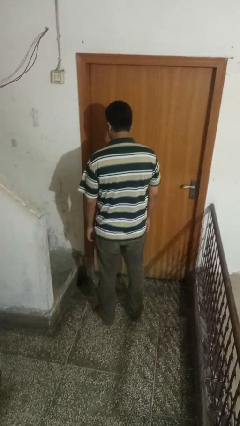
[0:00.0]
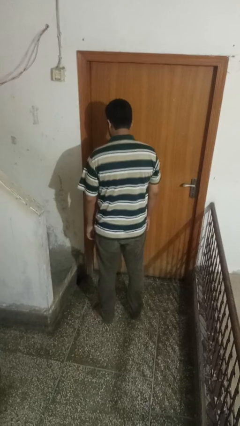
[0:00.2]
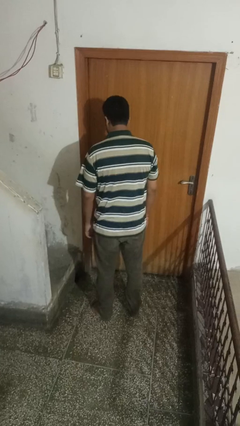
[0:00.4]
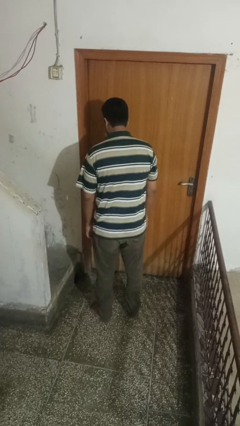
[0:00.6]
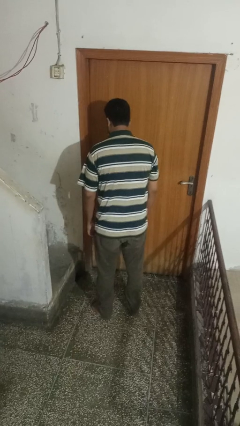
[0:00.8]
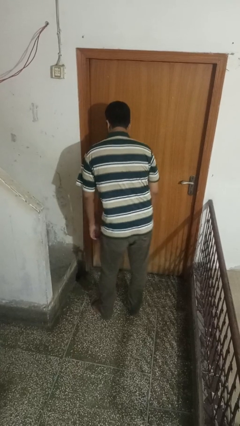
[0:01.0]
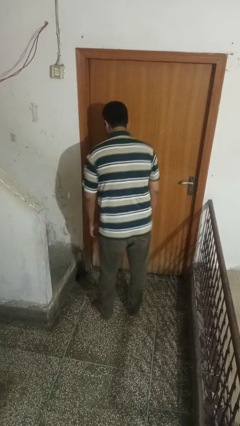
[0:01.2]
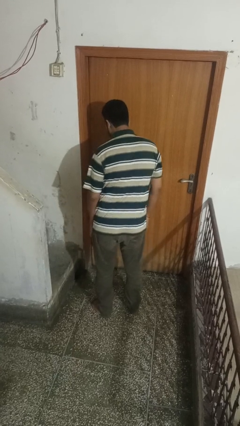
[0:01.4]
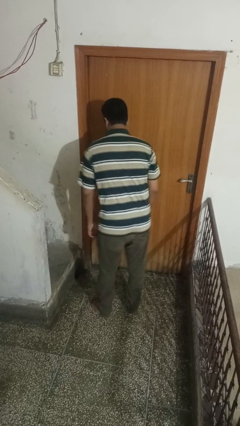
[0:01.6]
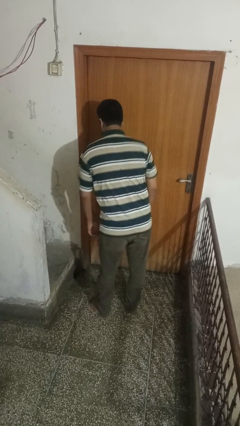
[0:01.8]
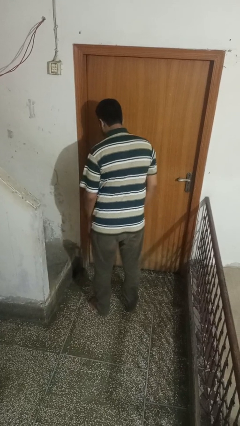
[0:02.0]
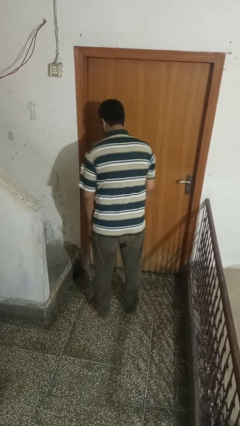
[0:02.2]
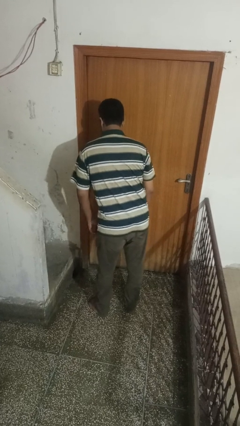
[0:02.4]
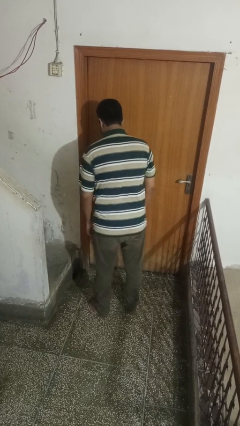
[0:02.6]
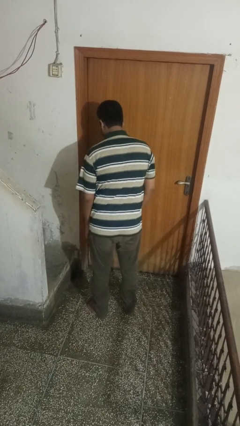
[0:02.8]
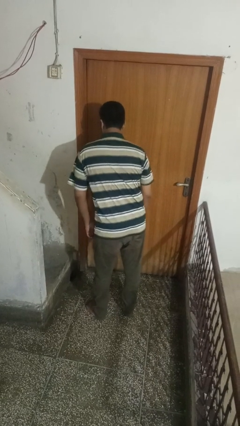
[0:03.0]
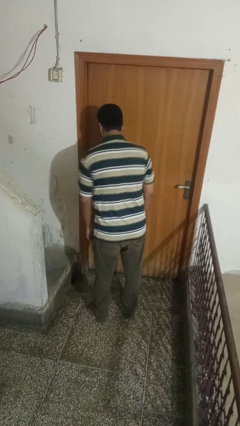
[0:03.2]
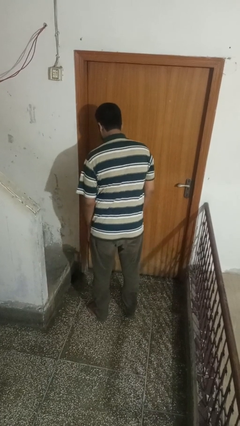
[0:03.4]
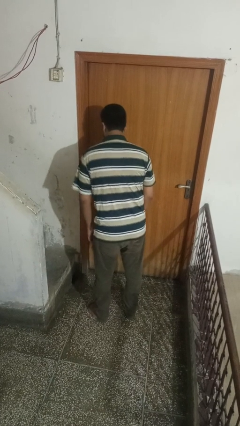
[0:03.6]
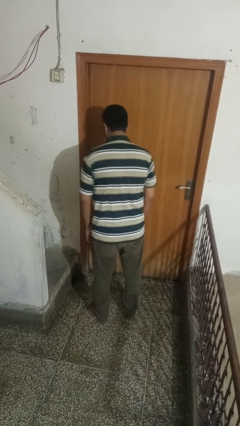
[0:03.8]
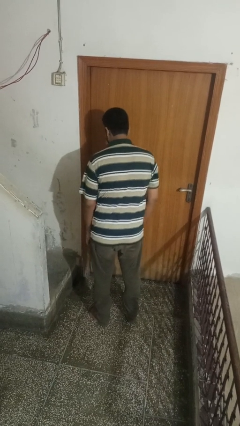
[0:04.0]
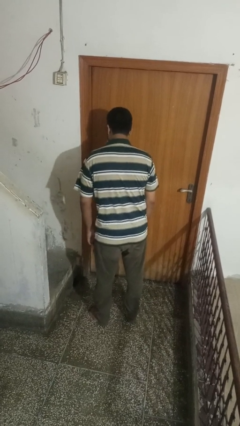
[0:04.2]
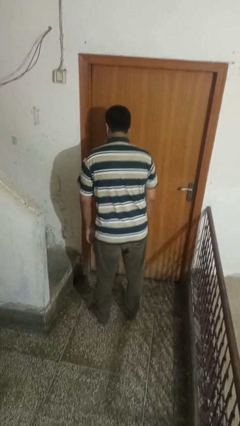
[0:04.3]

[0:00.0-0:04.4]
person wiggles hips

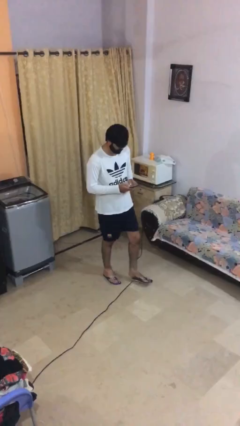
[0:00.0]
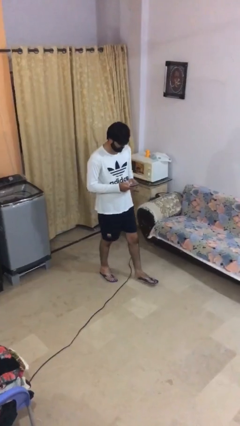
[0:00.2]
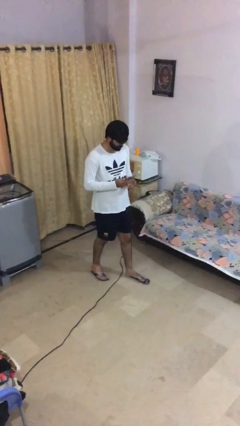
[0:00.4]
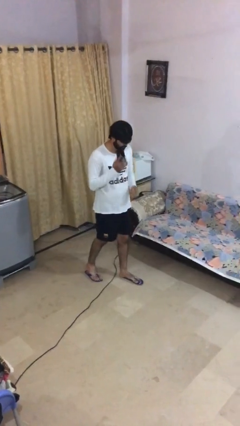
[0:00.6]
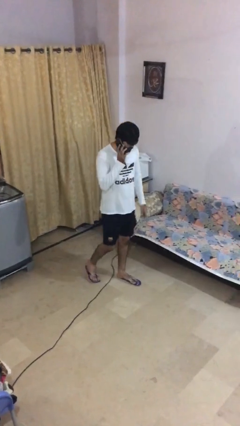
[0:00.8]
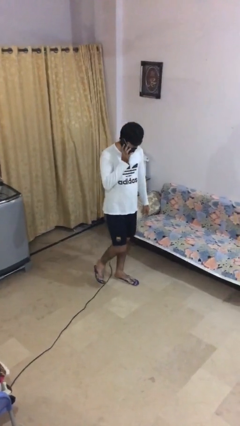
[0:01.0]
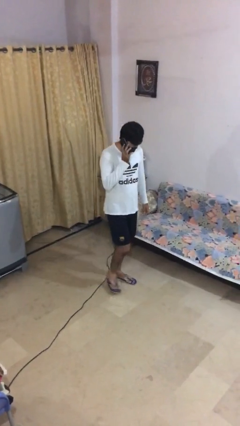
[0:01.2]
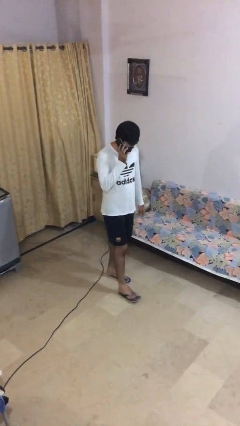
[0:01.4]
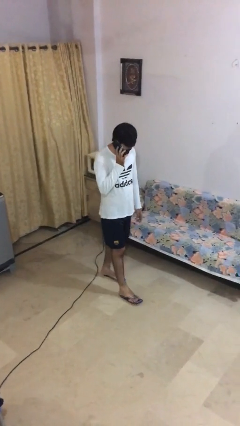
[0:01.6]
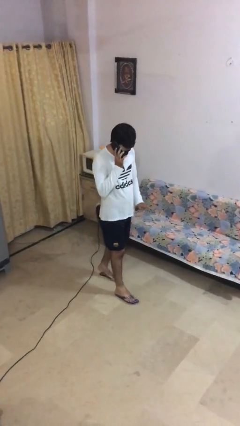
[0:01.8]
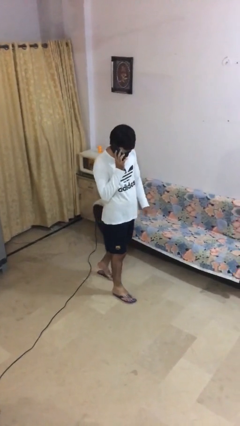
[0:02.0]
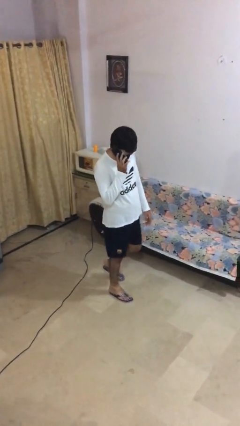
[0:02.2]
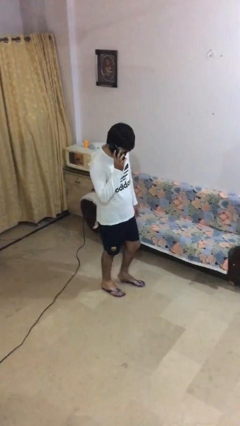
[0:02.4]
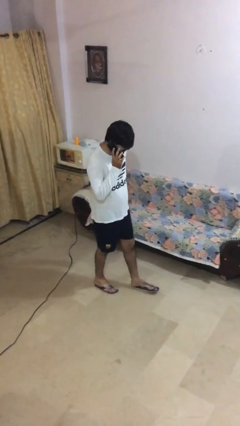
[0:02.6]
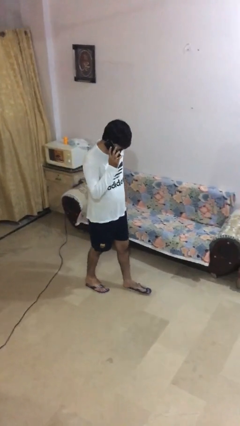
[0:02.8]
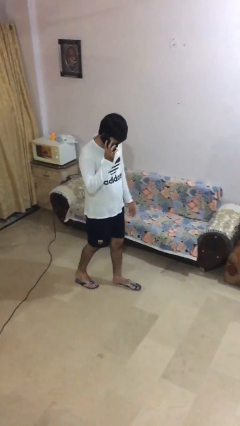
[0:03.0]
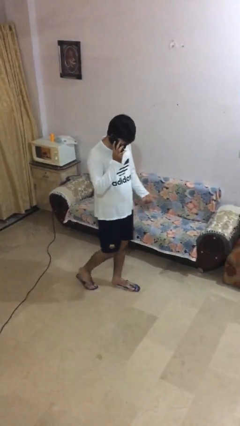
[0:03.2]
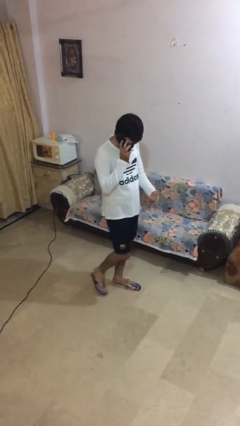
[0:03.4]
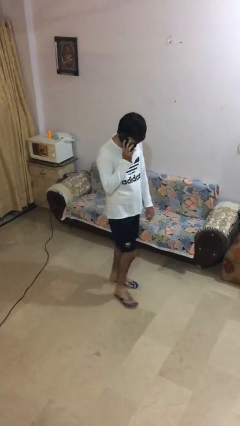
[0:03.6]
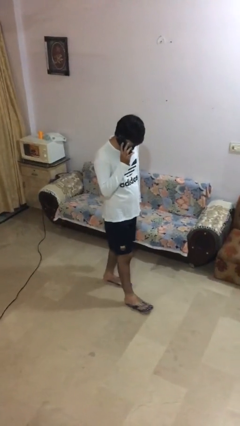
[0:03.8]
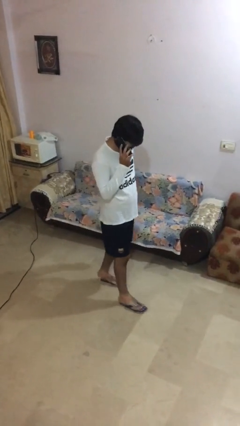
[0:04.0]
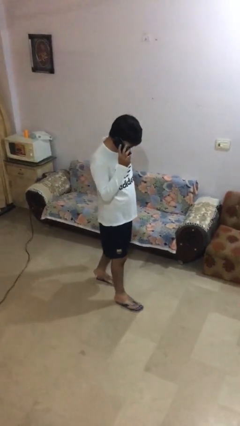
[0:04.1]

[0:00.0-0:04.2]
person talks on phone

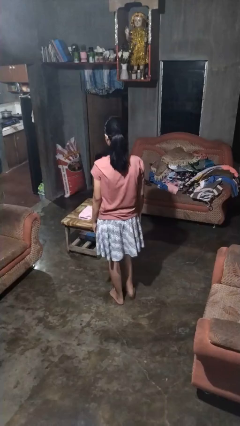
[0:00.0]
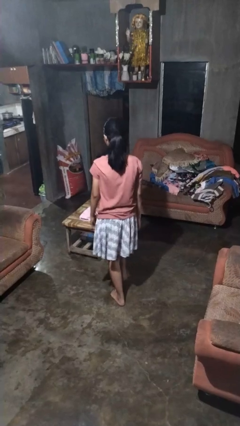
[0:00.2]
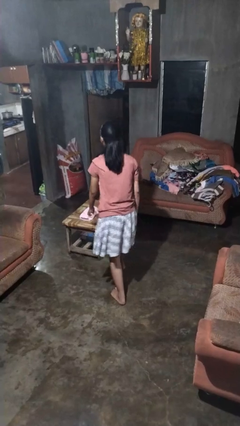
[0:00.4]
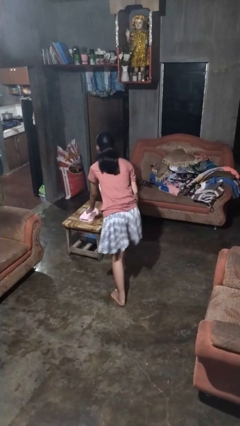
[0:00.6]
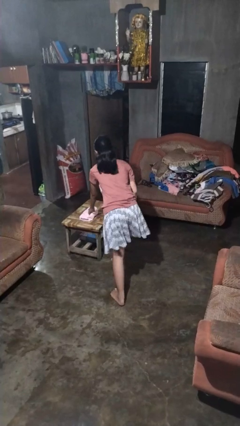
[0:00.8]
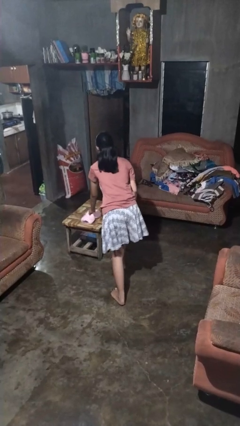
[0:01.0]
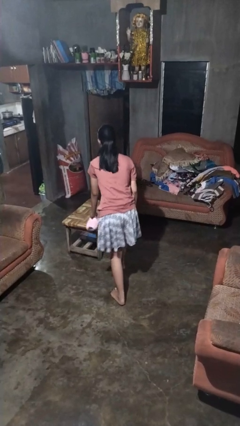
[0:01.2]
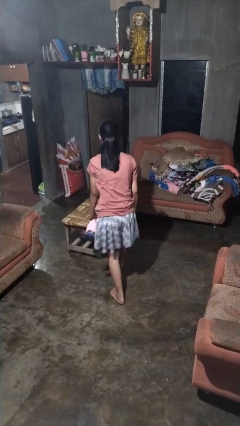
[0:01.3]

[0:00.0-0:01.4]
person picks up object from table

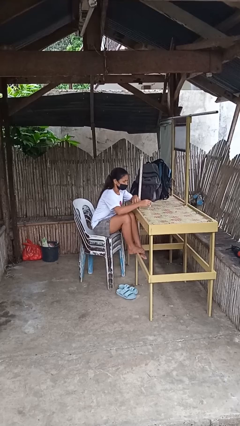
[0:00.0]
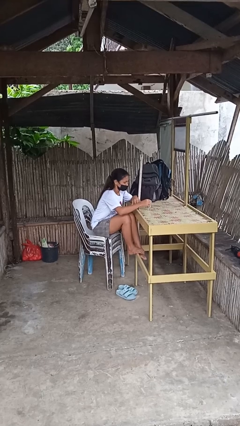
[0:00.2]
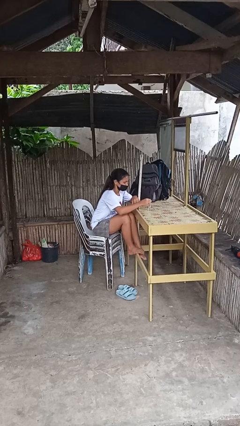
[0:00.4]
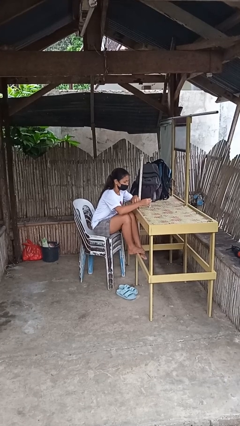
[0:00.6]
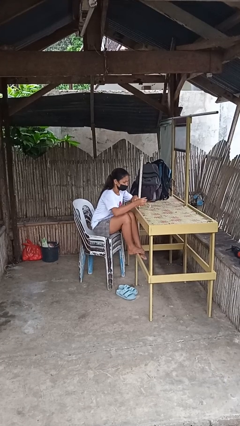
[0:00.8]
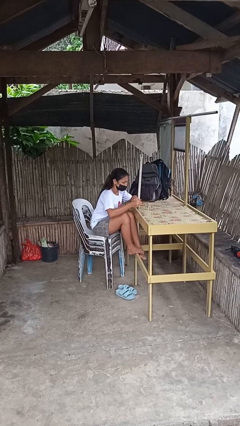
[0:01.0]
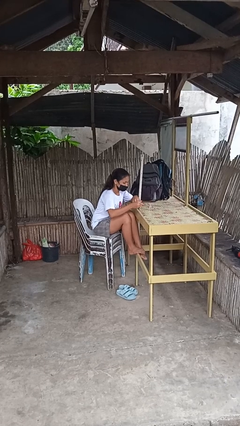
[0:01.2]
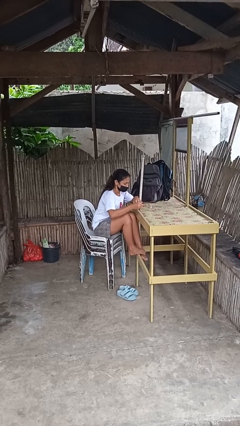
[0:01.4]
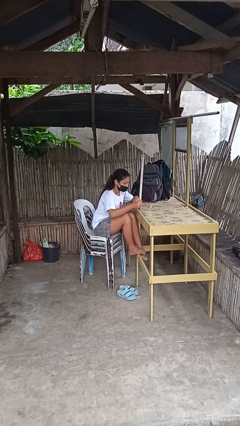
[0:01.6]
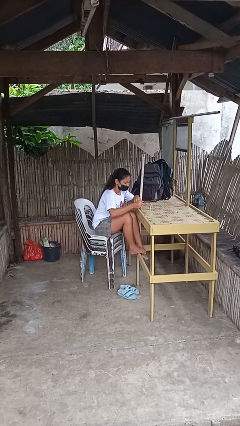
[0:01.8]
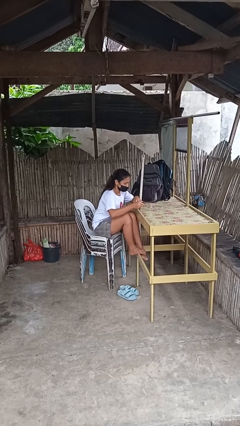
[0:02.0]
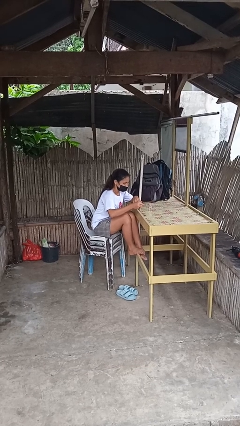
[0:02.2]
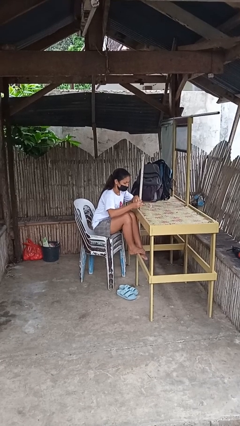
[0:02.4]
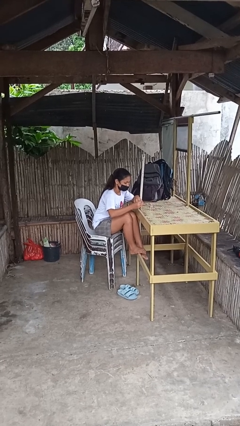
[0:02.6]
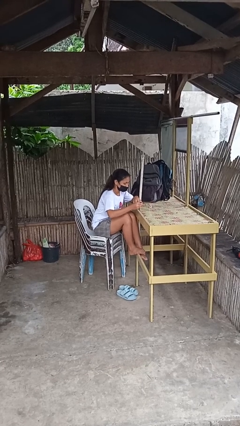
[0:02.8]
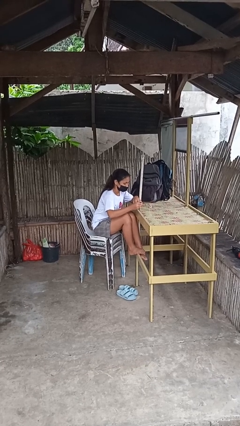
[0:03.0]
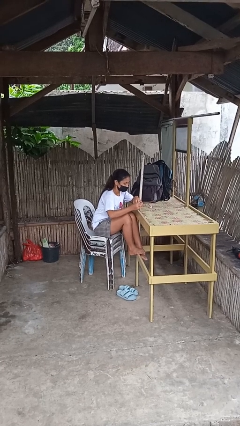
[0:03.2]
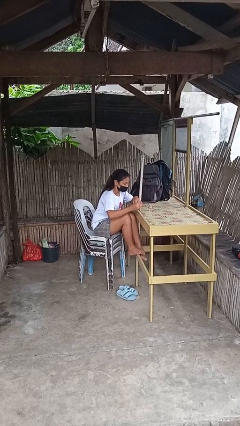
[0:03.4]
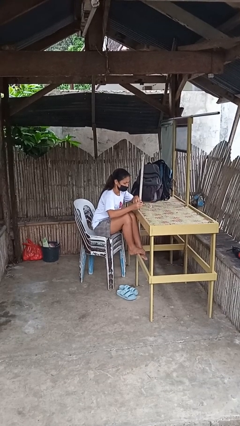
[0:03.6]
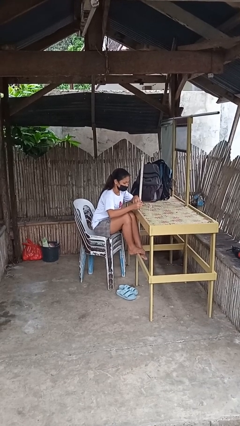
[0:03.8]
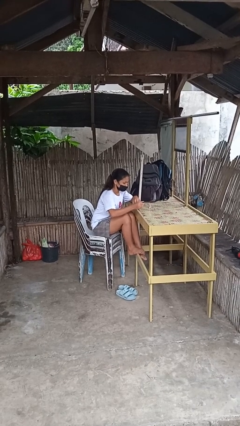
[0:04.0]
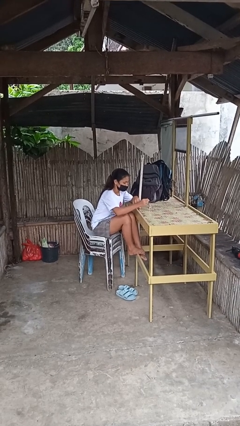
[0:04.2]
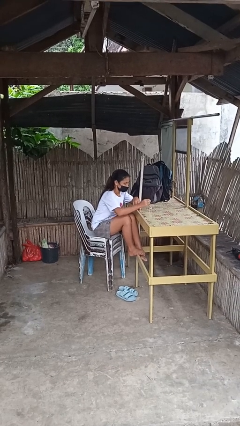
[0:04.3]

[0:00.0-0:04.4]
person paints fingernails

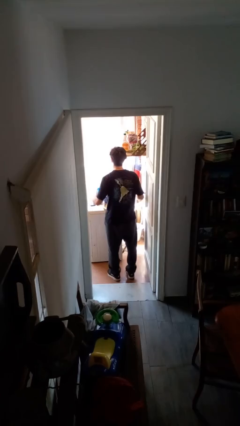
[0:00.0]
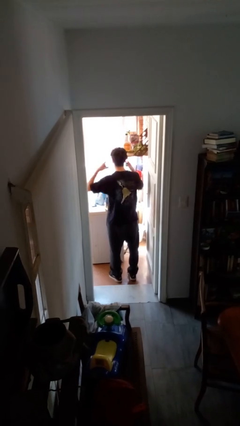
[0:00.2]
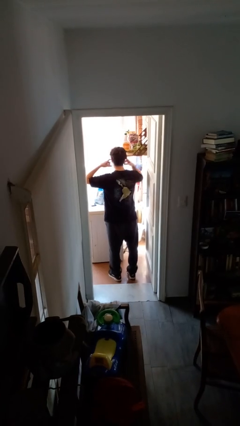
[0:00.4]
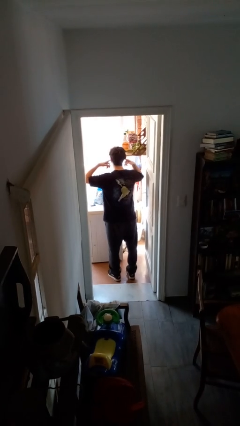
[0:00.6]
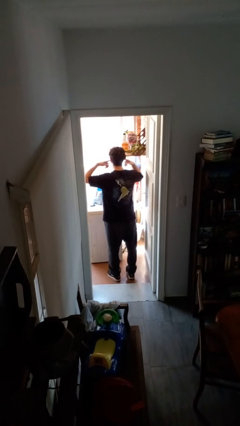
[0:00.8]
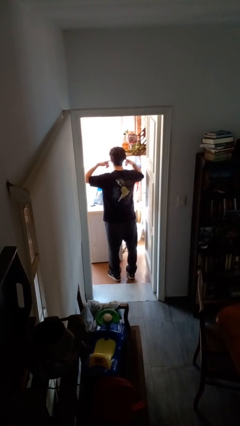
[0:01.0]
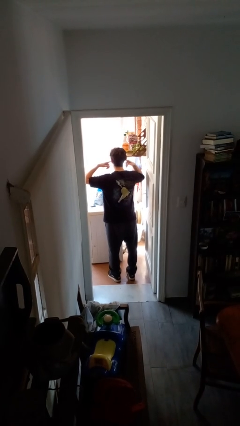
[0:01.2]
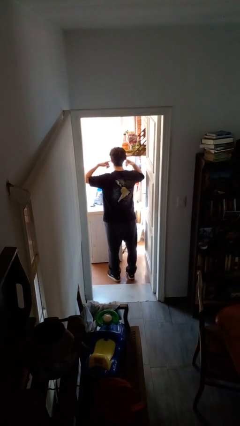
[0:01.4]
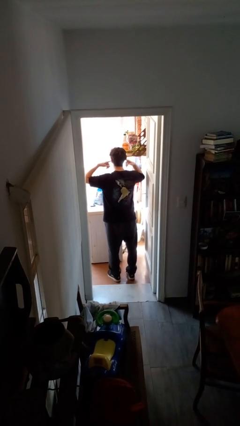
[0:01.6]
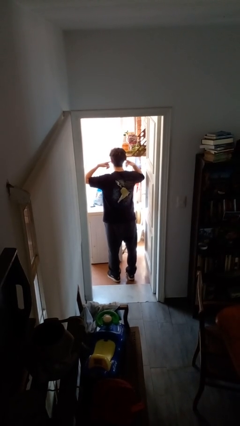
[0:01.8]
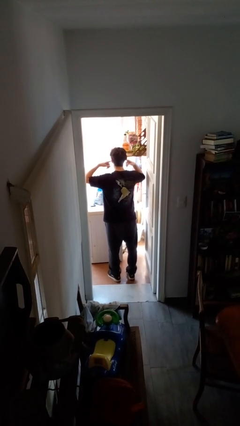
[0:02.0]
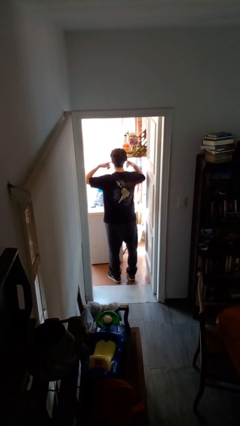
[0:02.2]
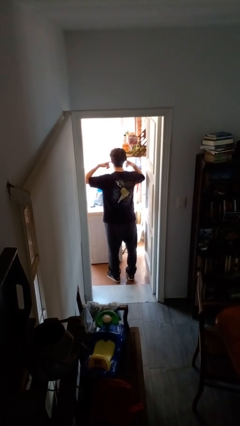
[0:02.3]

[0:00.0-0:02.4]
person puts fingers in ear

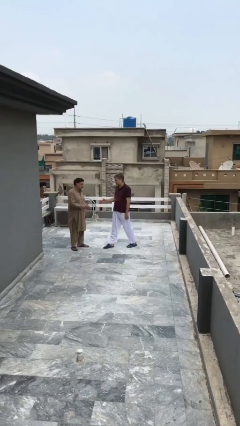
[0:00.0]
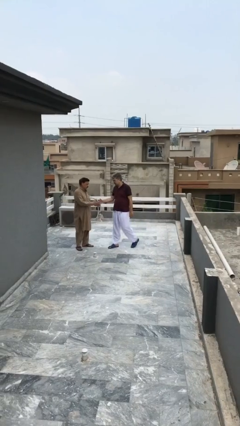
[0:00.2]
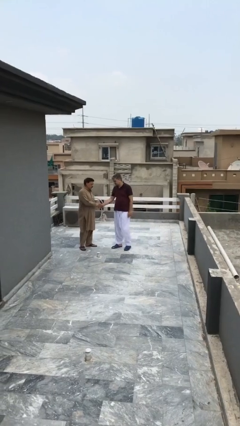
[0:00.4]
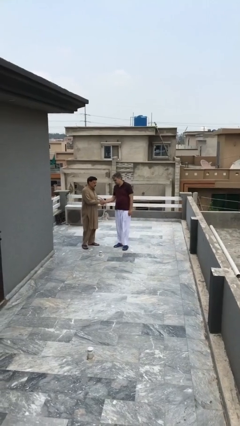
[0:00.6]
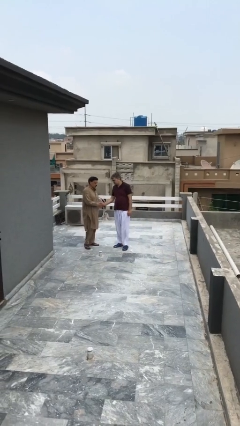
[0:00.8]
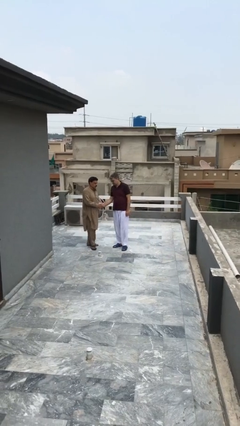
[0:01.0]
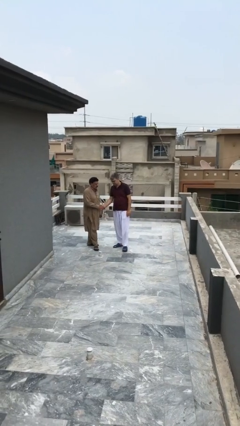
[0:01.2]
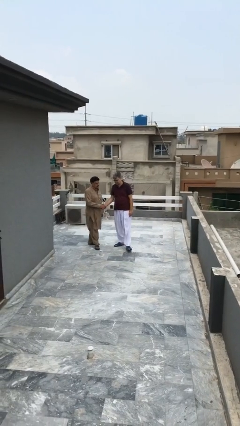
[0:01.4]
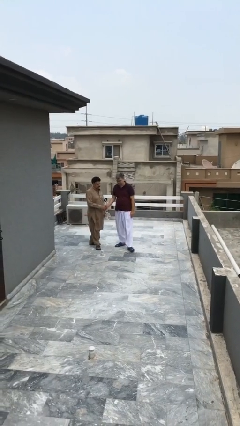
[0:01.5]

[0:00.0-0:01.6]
person shakes hand
